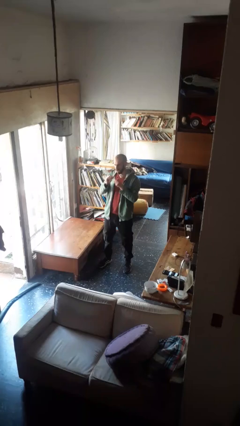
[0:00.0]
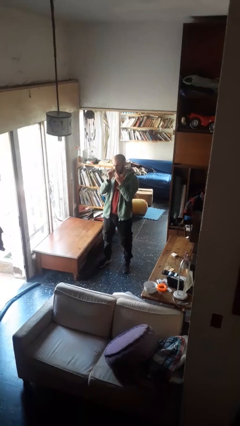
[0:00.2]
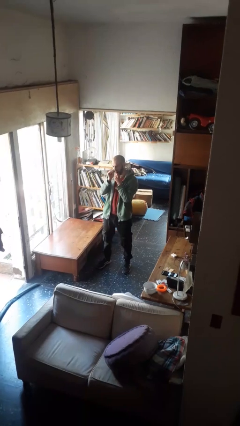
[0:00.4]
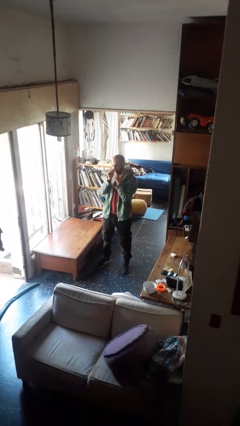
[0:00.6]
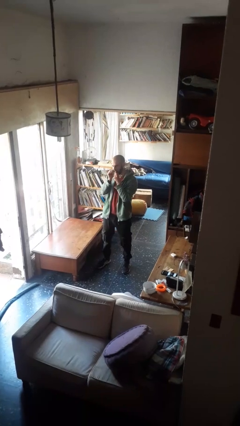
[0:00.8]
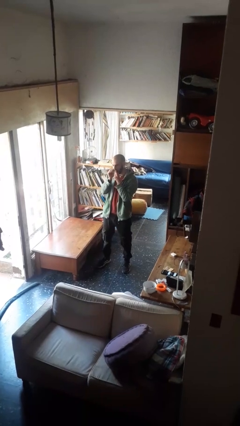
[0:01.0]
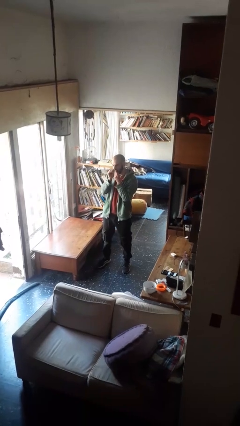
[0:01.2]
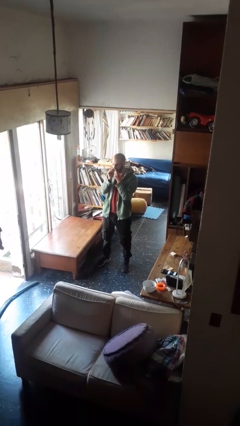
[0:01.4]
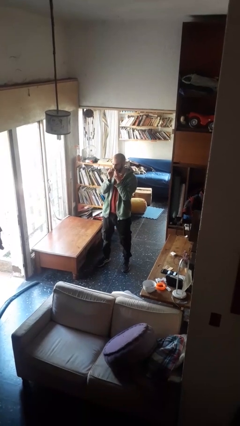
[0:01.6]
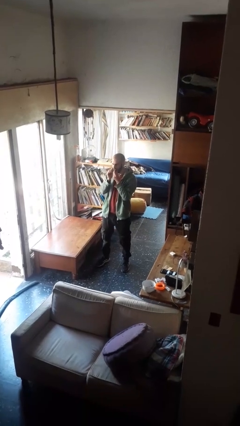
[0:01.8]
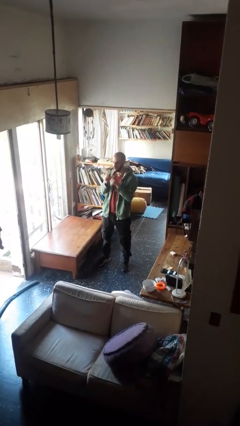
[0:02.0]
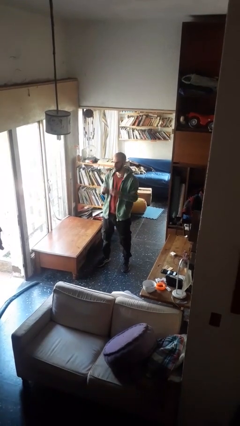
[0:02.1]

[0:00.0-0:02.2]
person flosses

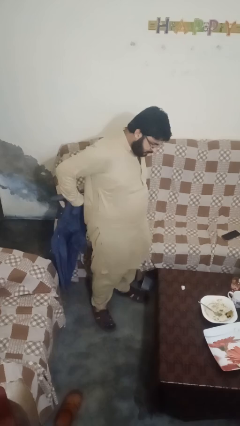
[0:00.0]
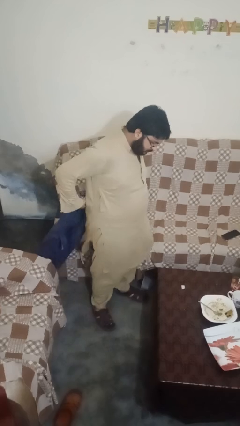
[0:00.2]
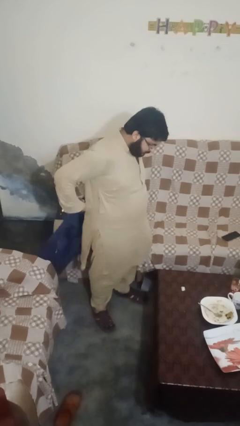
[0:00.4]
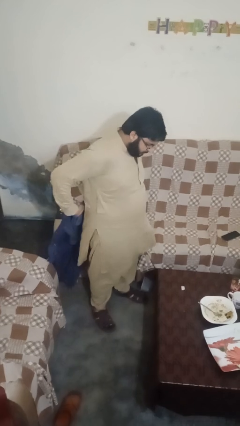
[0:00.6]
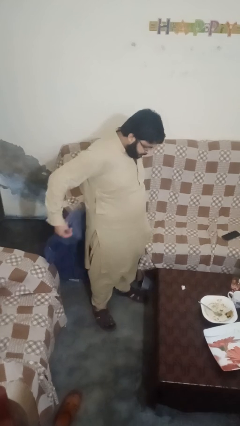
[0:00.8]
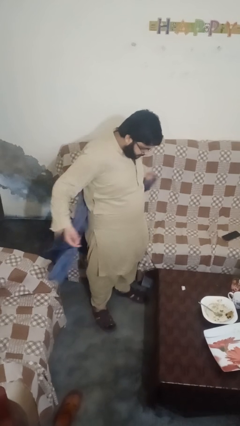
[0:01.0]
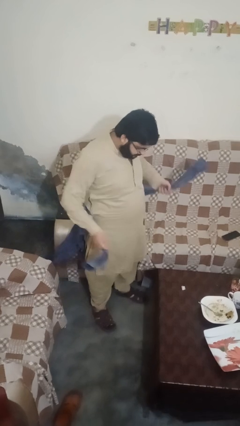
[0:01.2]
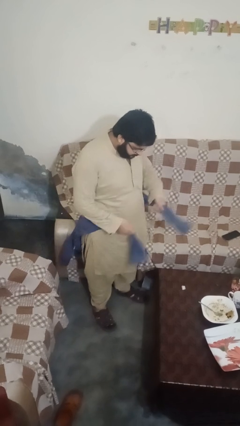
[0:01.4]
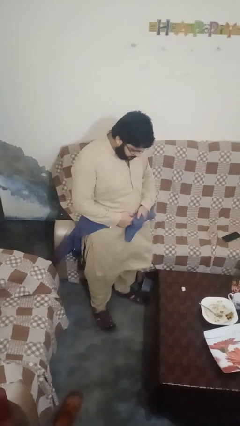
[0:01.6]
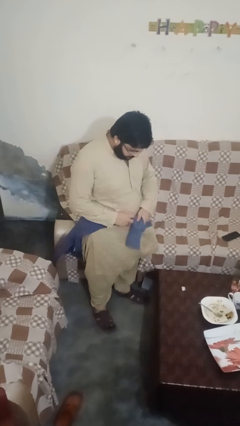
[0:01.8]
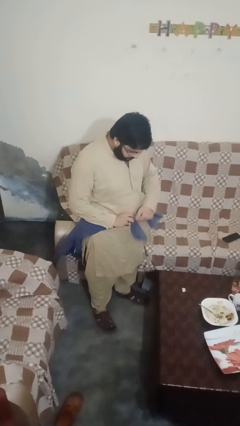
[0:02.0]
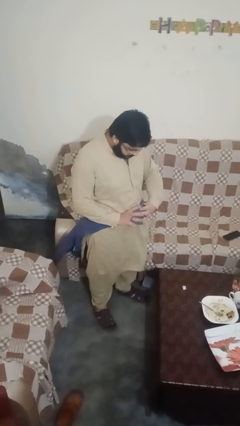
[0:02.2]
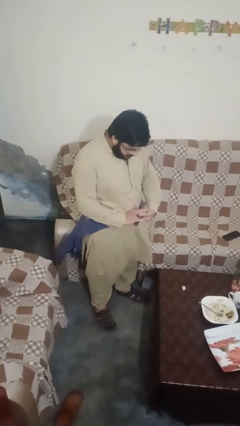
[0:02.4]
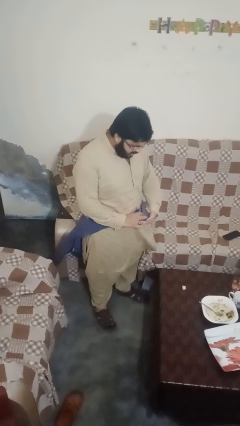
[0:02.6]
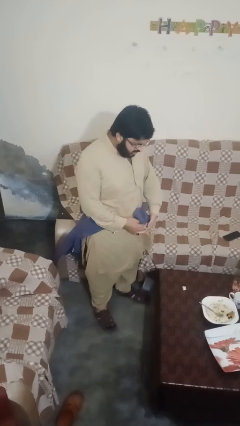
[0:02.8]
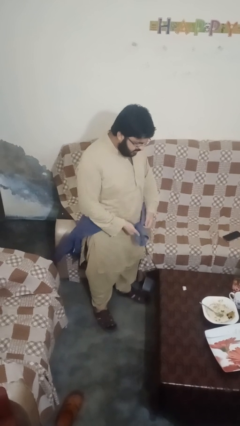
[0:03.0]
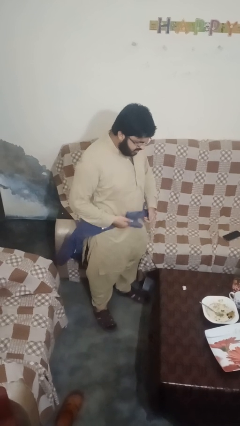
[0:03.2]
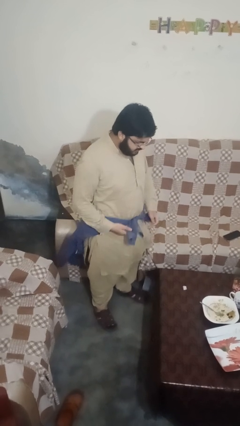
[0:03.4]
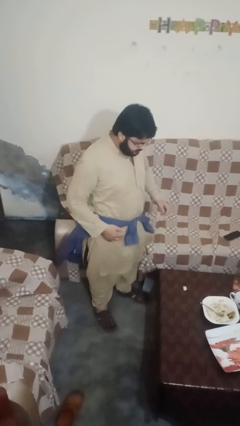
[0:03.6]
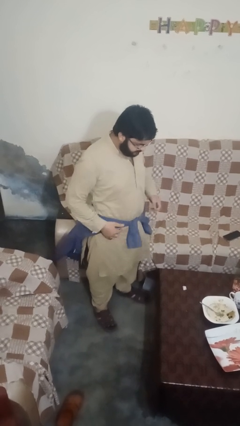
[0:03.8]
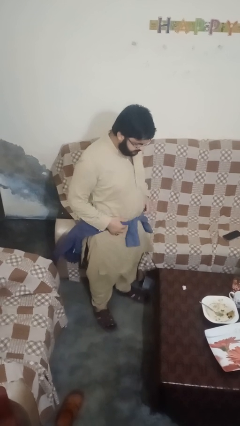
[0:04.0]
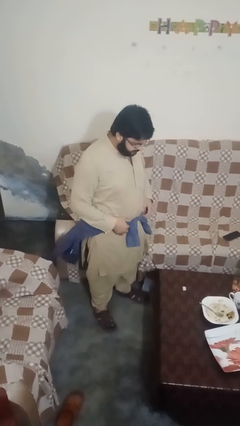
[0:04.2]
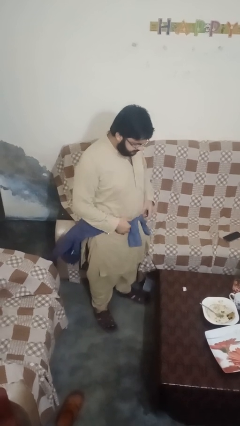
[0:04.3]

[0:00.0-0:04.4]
person ties jacket around waist

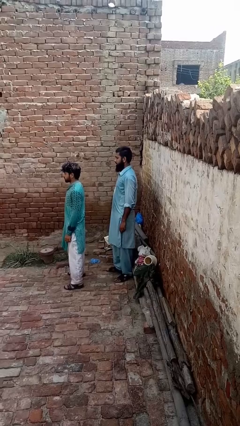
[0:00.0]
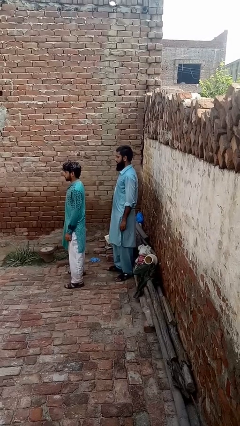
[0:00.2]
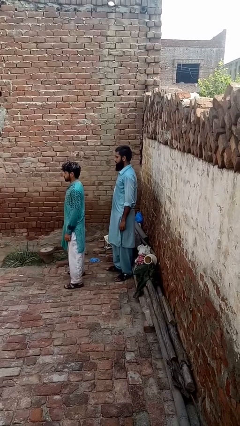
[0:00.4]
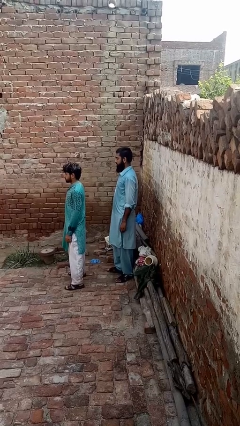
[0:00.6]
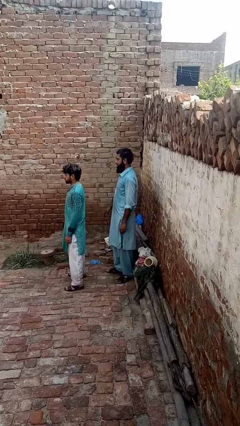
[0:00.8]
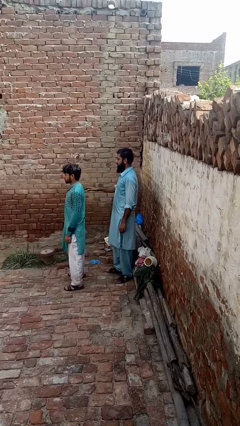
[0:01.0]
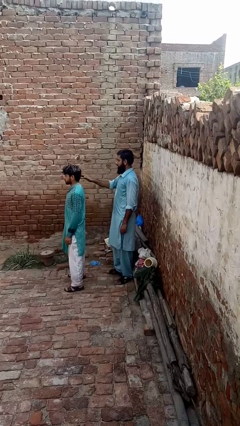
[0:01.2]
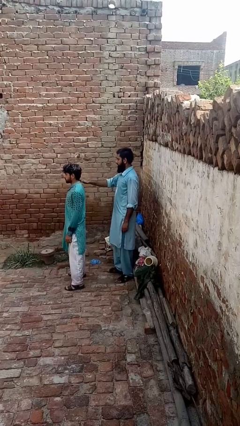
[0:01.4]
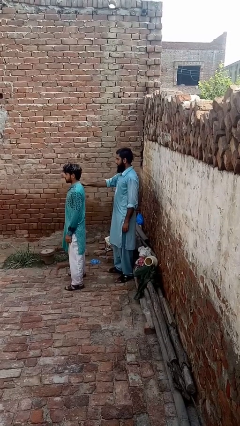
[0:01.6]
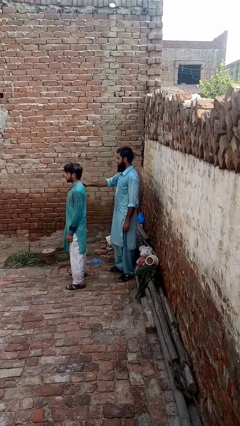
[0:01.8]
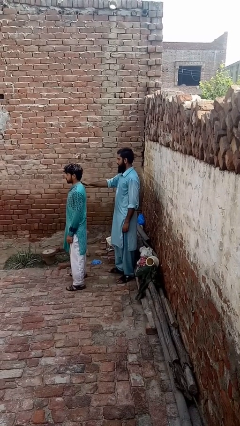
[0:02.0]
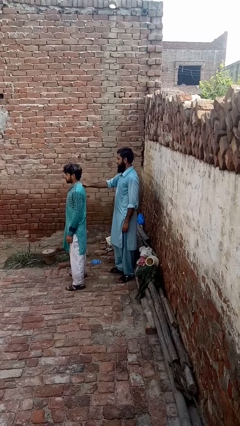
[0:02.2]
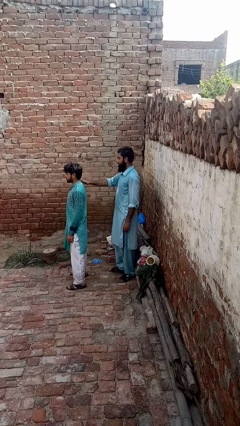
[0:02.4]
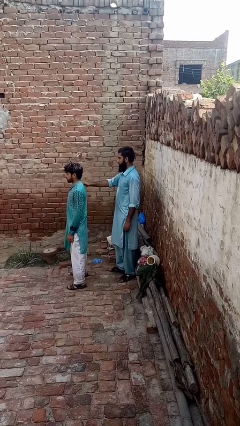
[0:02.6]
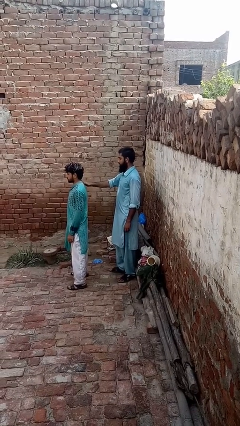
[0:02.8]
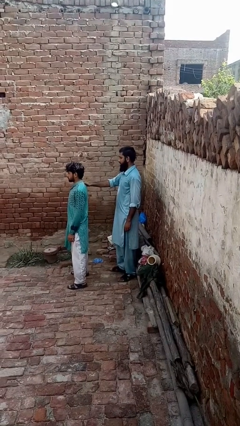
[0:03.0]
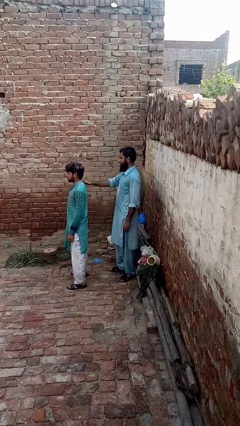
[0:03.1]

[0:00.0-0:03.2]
person touches back of person

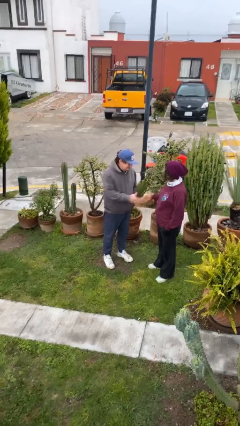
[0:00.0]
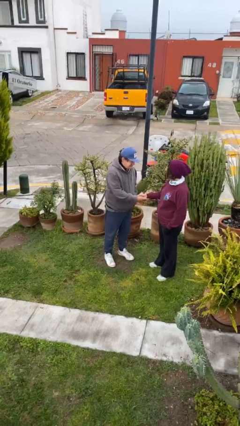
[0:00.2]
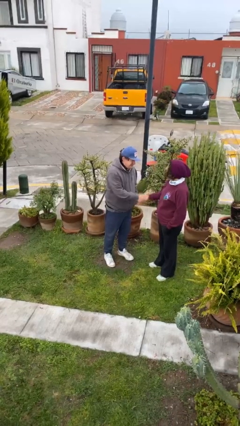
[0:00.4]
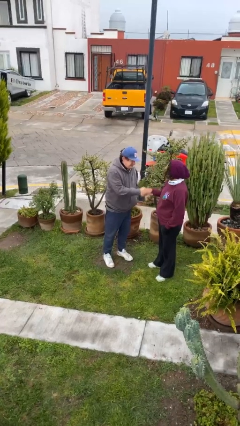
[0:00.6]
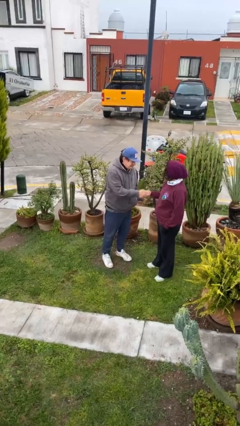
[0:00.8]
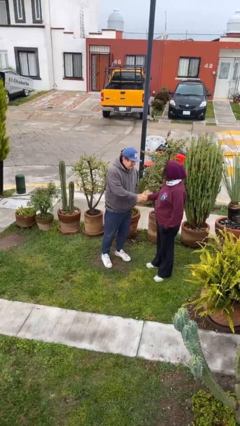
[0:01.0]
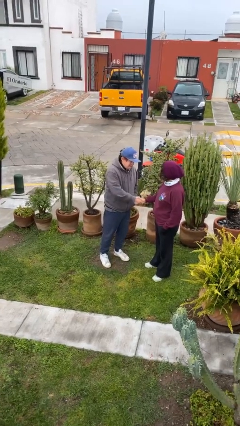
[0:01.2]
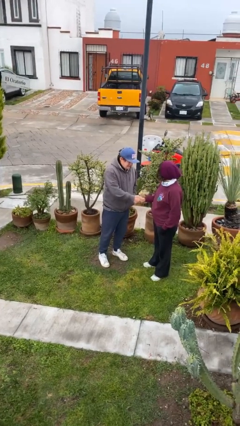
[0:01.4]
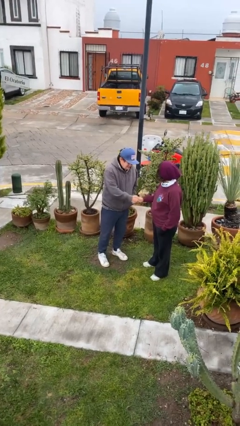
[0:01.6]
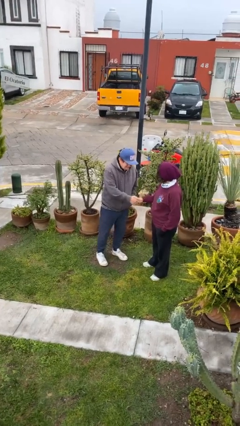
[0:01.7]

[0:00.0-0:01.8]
person shakes hand

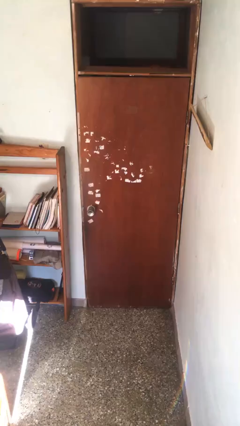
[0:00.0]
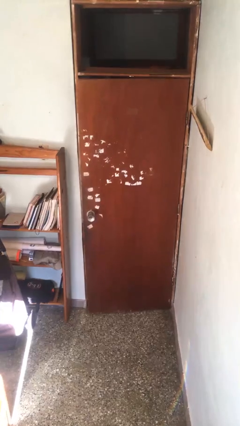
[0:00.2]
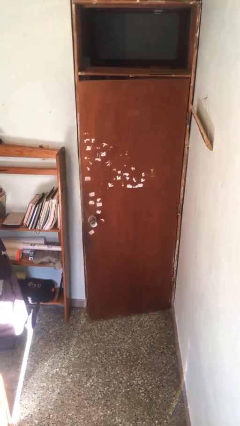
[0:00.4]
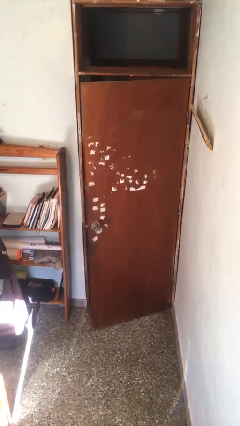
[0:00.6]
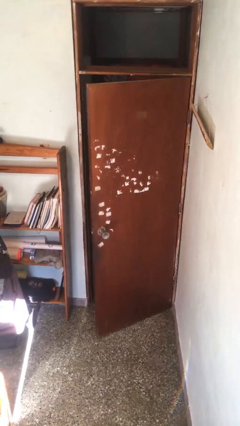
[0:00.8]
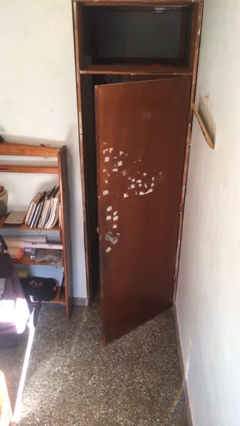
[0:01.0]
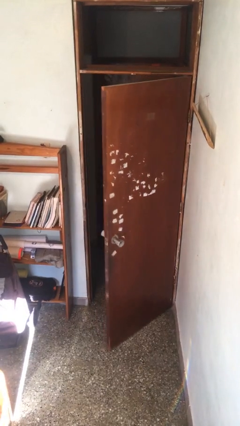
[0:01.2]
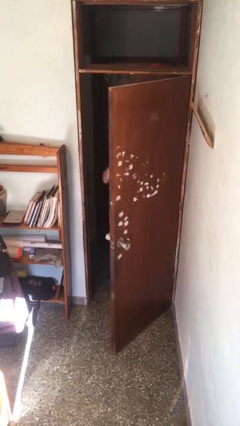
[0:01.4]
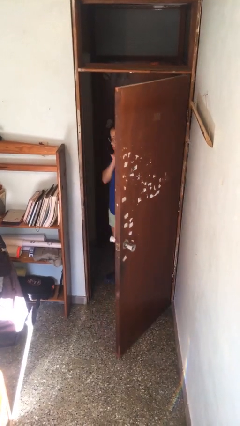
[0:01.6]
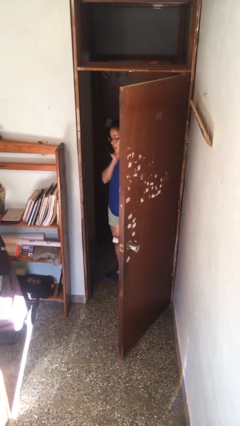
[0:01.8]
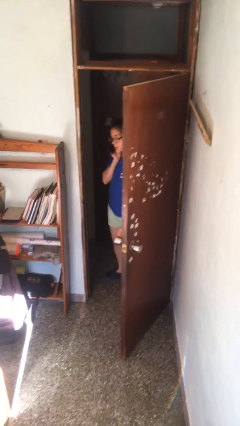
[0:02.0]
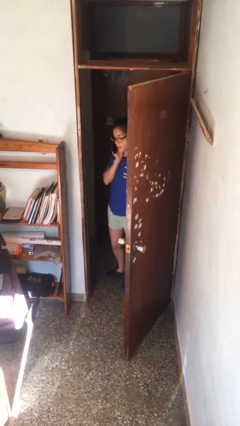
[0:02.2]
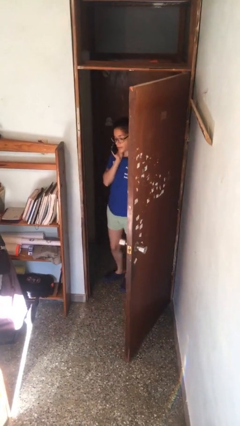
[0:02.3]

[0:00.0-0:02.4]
person opens facility door

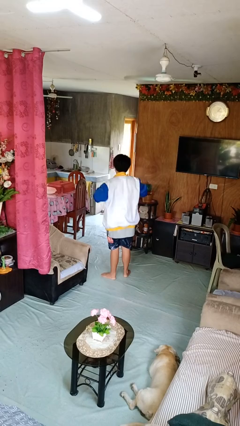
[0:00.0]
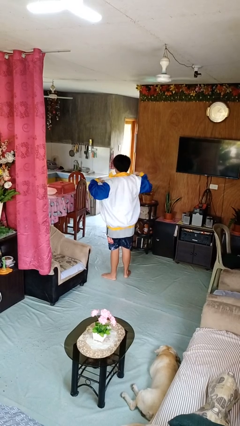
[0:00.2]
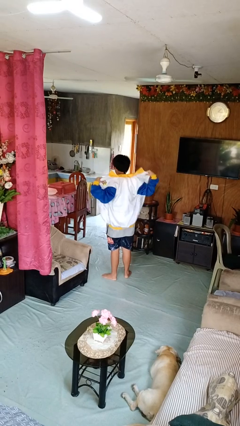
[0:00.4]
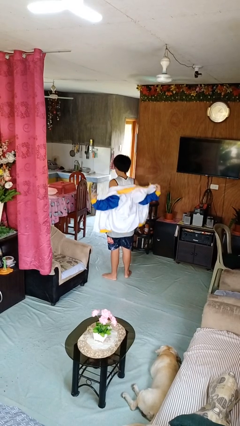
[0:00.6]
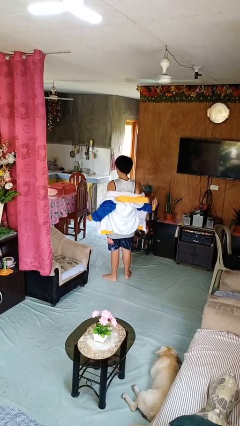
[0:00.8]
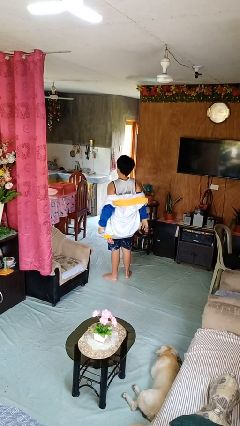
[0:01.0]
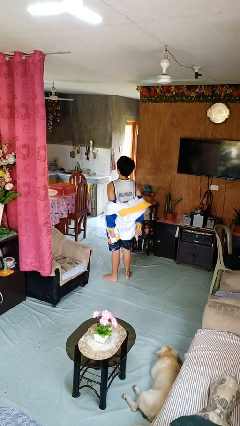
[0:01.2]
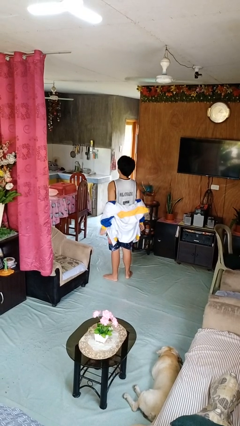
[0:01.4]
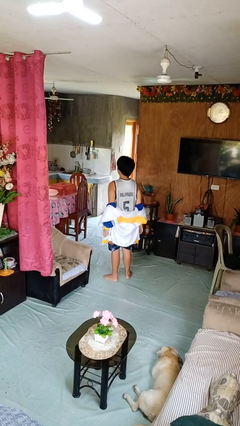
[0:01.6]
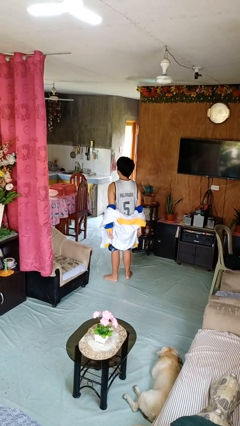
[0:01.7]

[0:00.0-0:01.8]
person takes off jacket

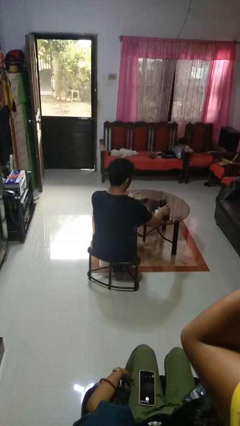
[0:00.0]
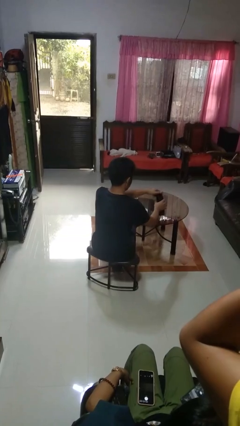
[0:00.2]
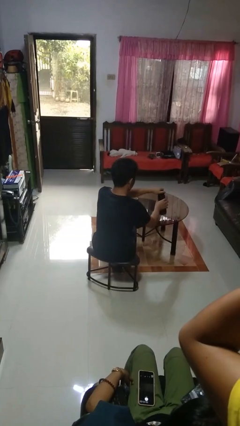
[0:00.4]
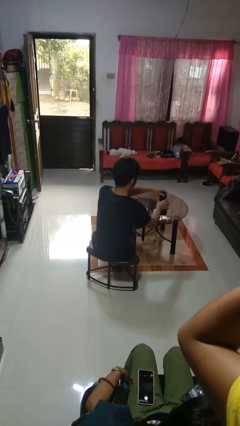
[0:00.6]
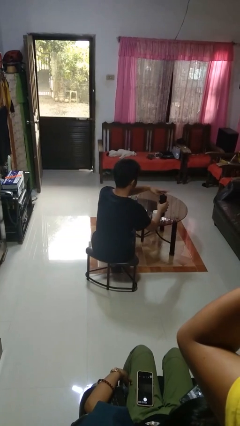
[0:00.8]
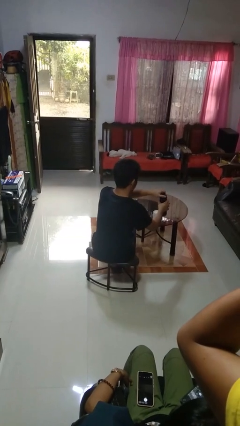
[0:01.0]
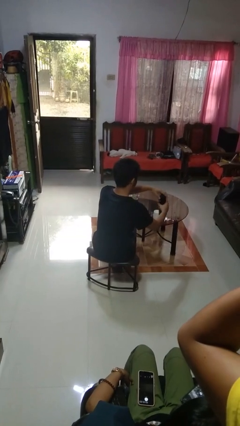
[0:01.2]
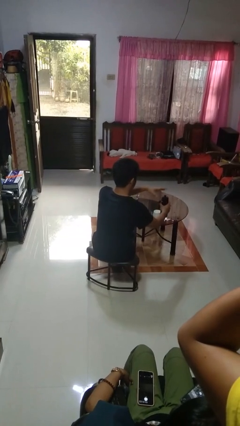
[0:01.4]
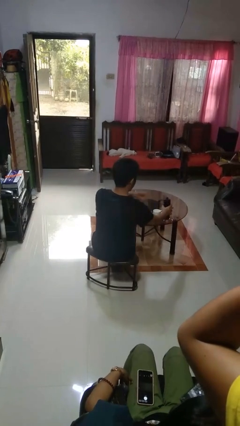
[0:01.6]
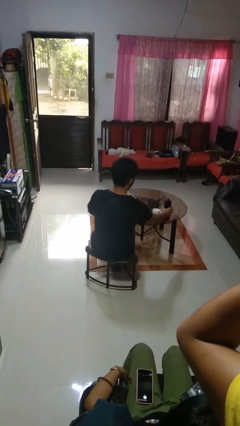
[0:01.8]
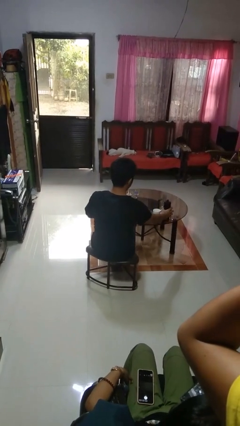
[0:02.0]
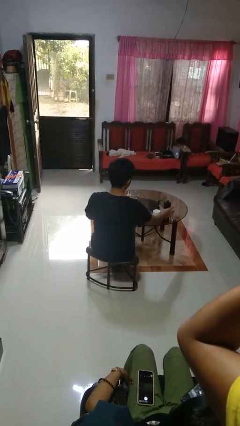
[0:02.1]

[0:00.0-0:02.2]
person screws lid to bottle
